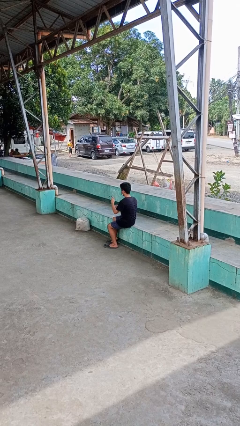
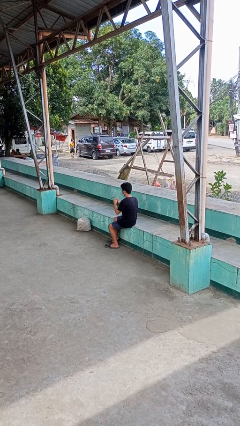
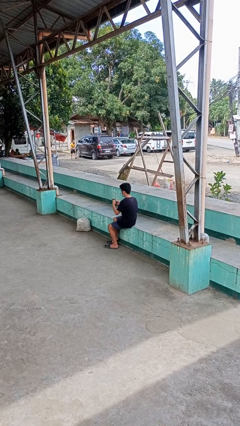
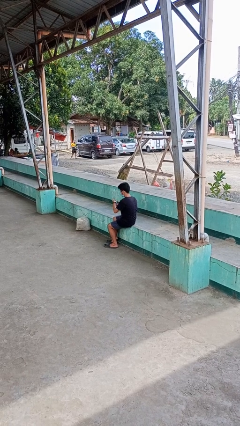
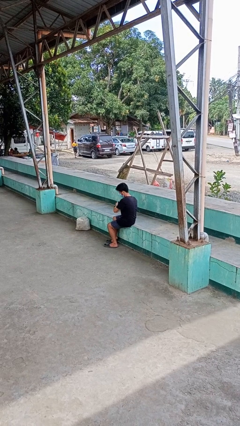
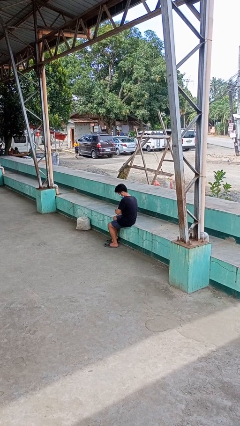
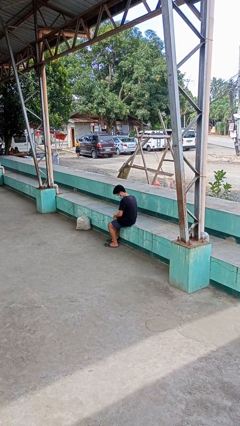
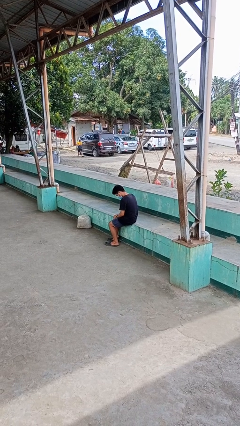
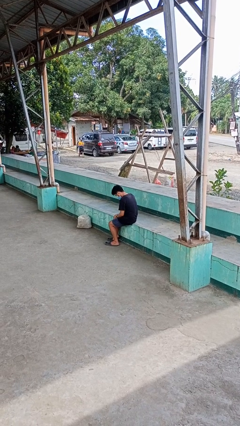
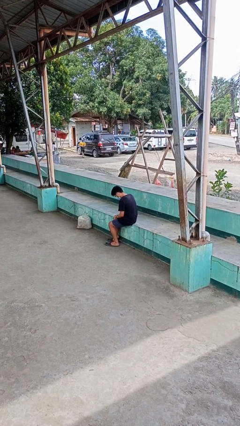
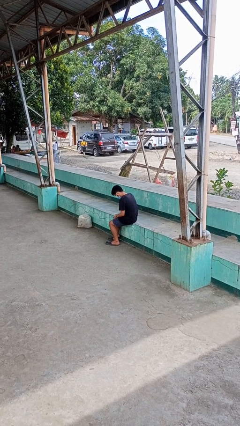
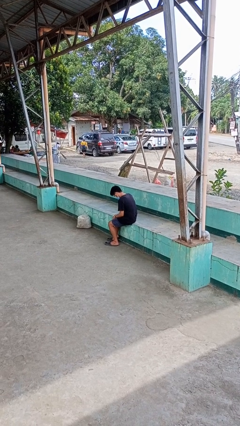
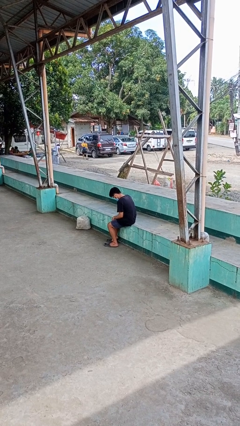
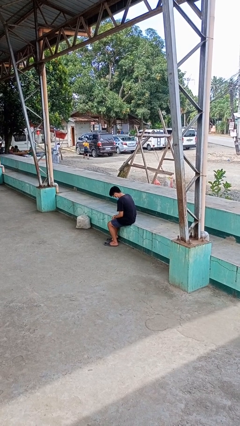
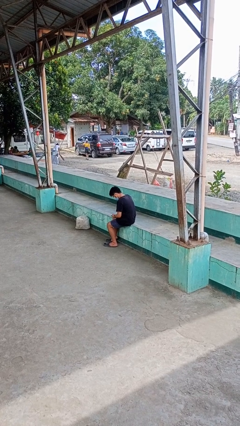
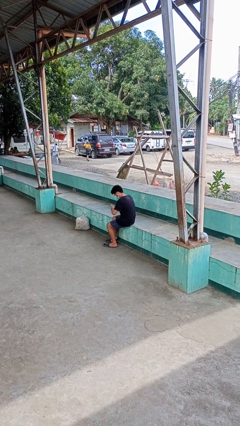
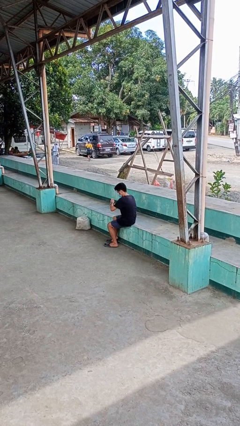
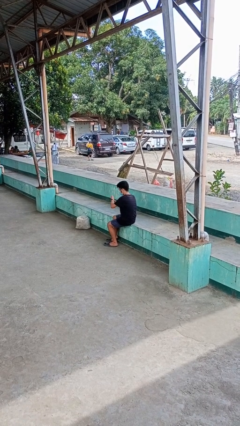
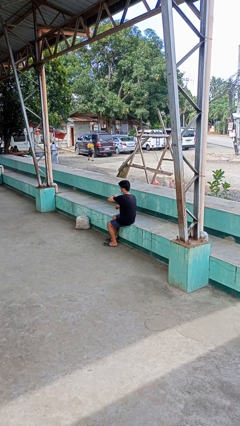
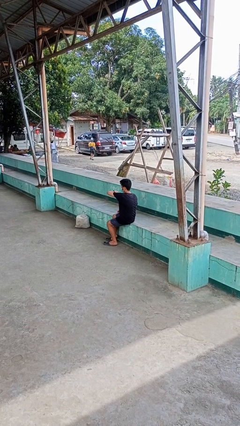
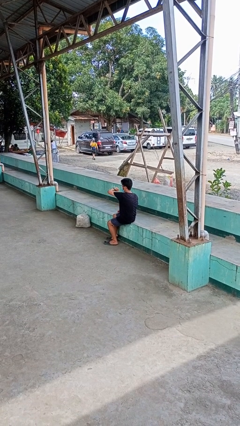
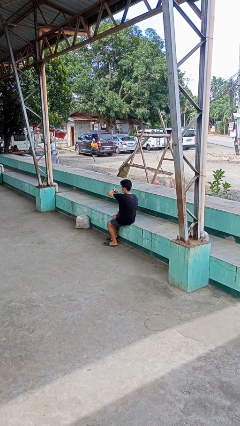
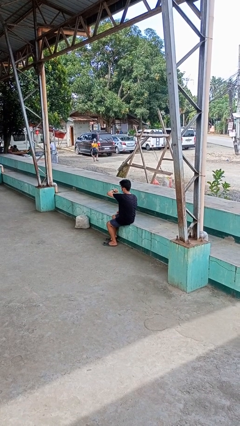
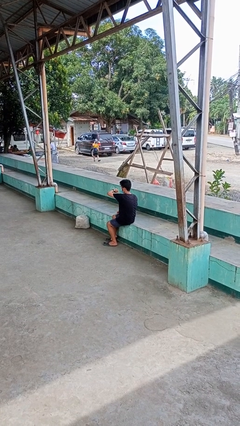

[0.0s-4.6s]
person puts on wristwatch

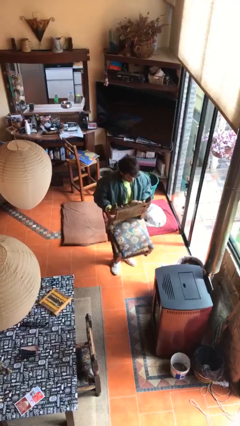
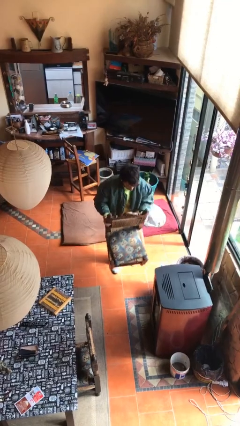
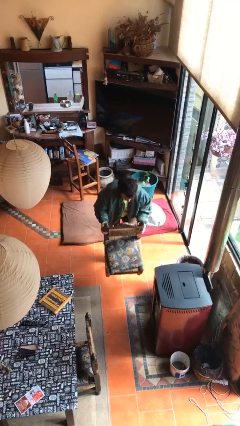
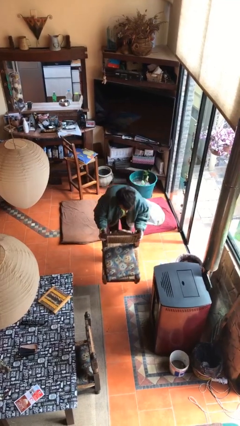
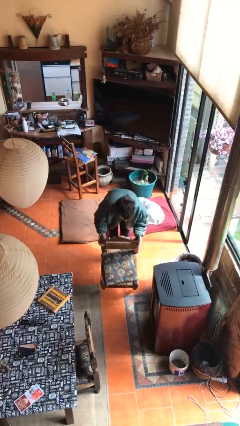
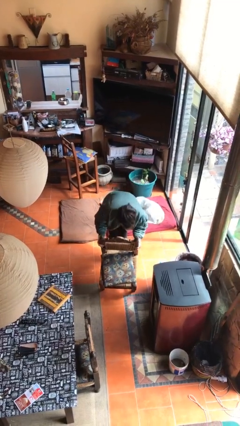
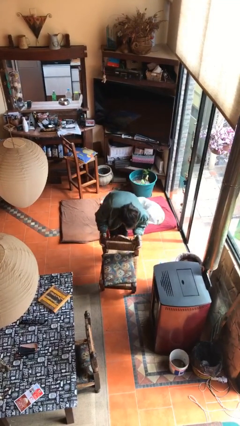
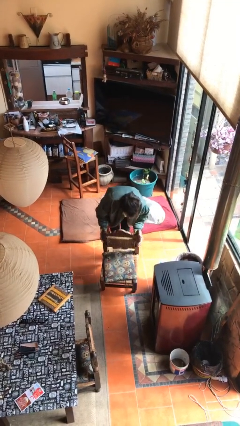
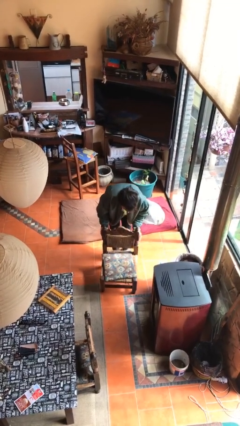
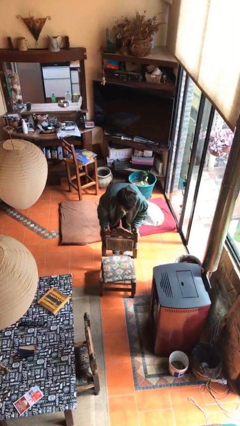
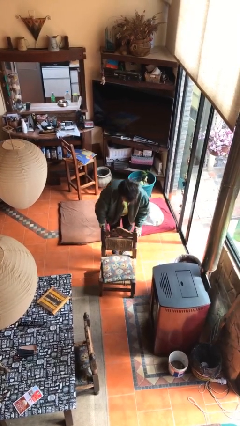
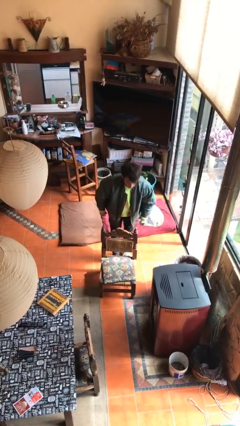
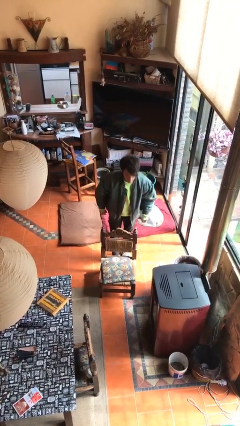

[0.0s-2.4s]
person puts down object on floor

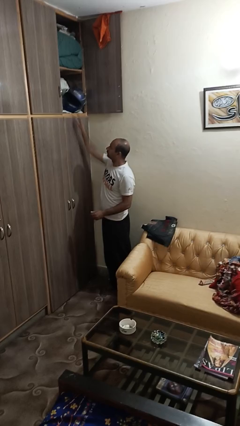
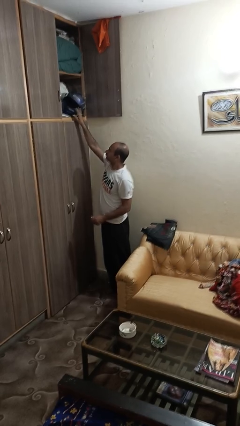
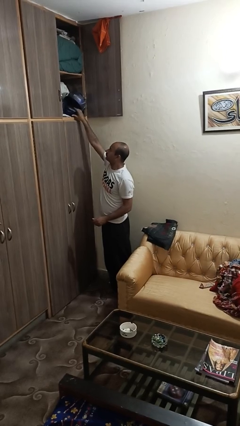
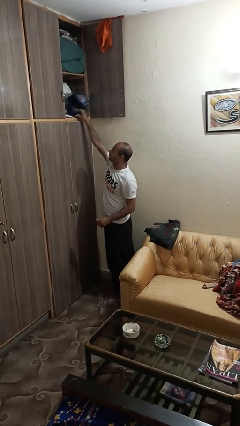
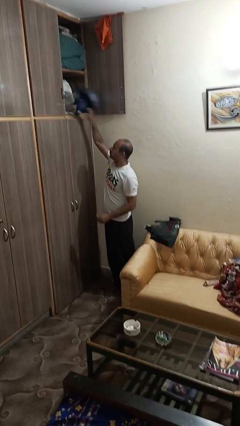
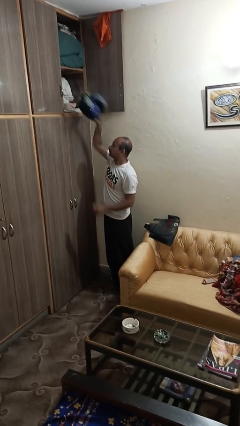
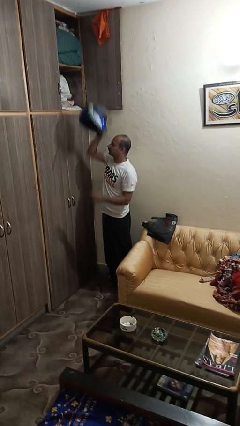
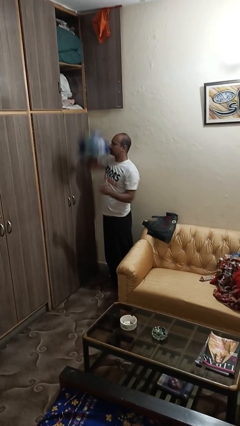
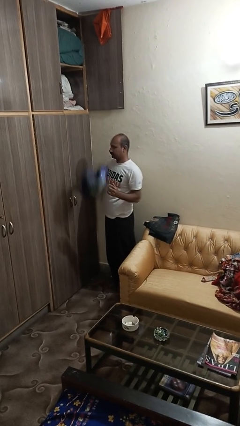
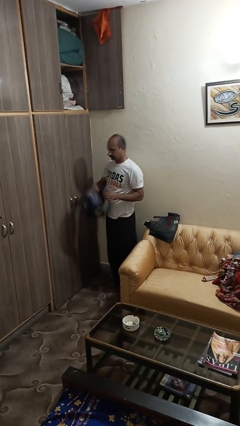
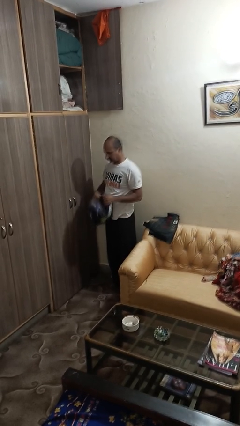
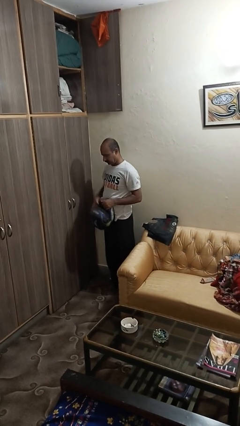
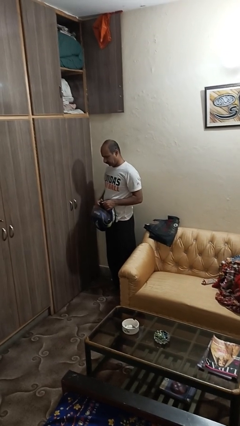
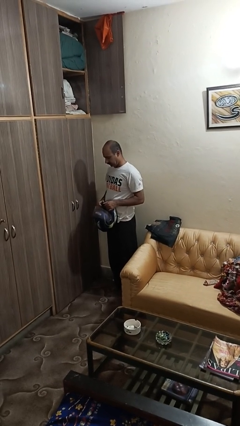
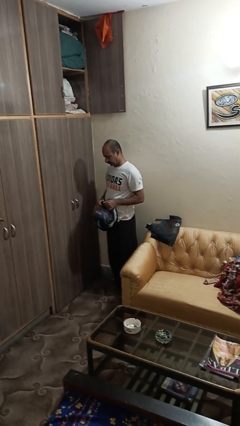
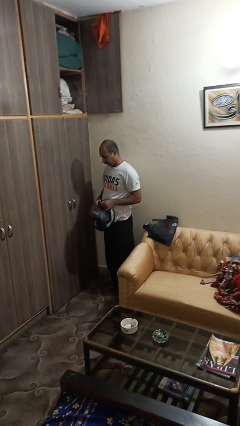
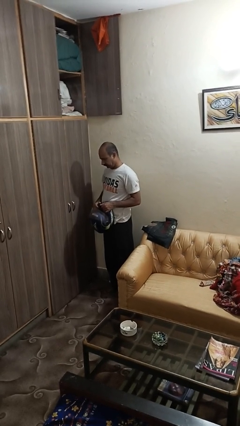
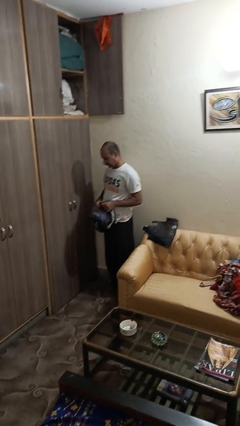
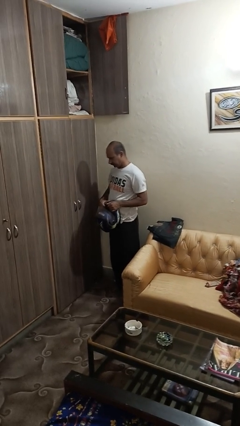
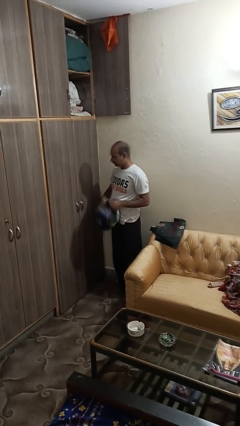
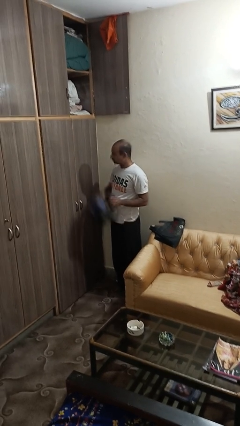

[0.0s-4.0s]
person picks up object from shelf

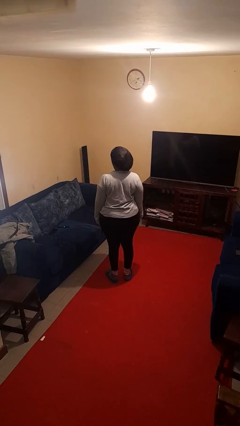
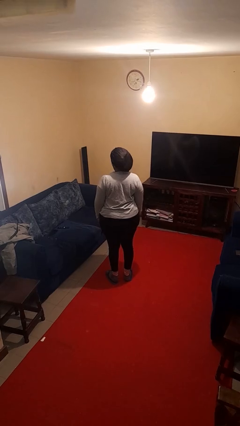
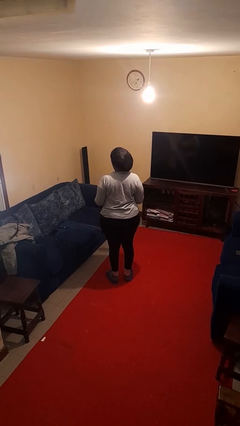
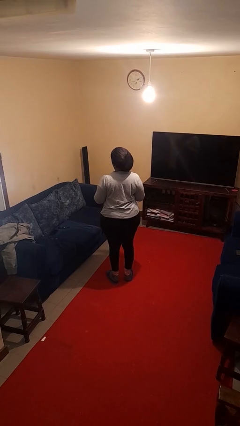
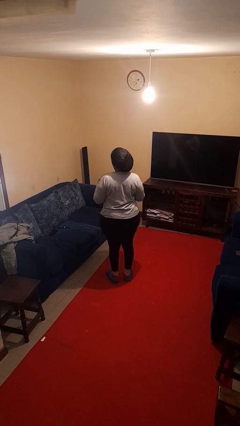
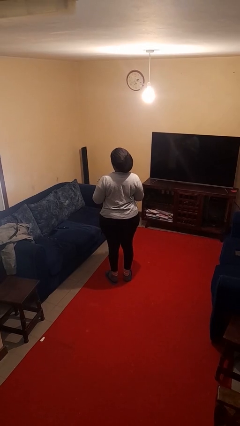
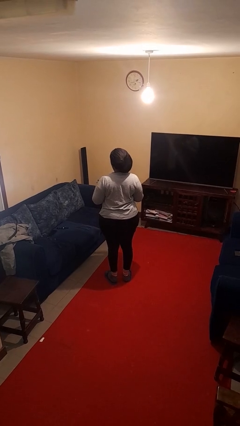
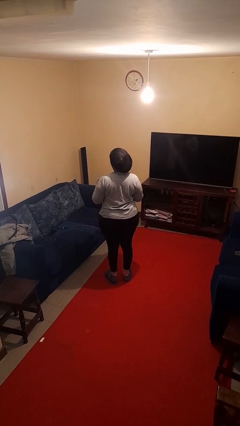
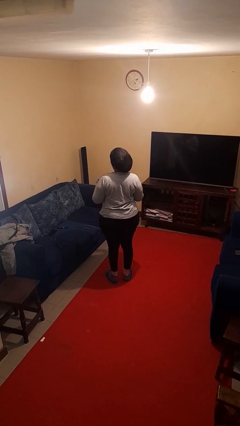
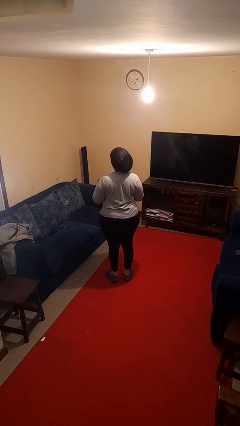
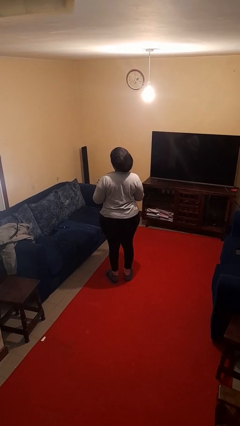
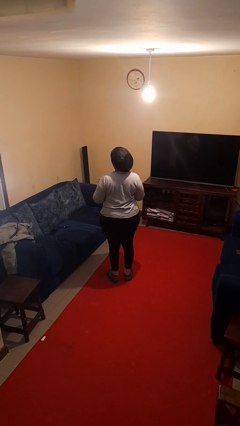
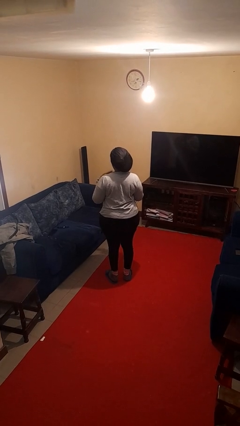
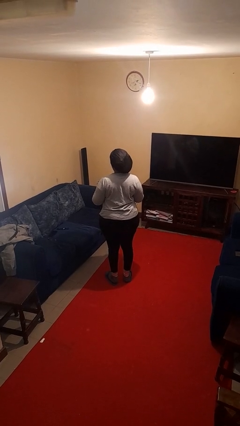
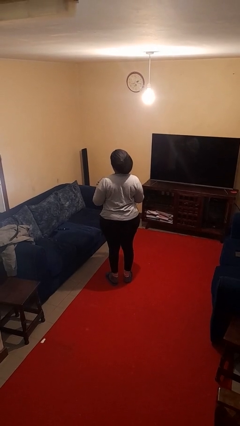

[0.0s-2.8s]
person drums on chest

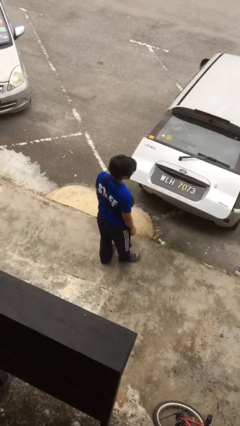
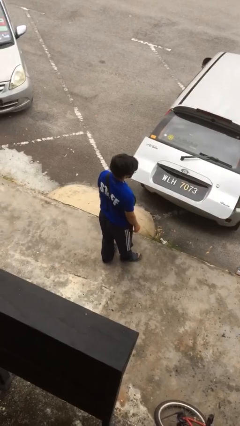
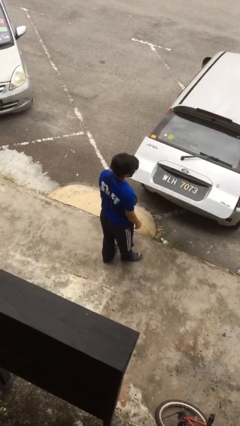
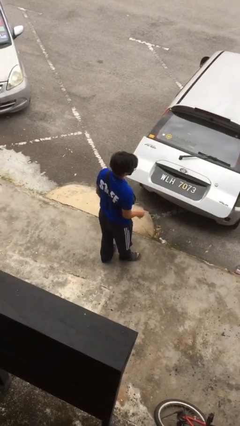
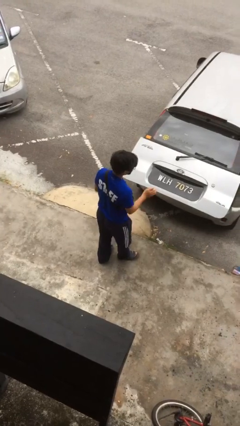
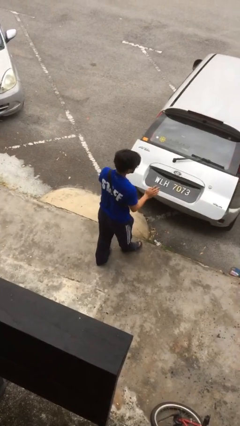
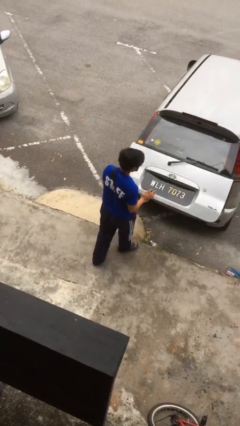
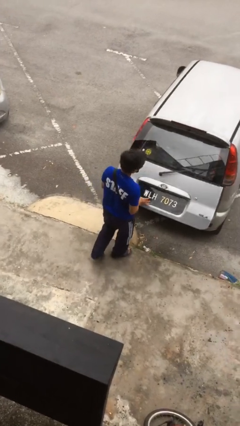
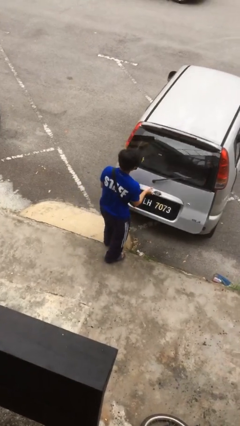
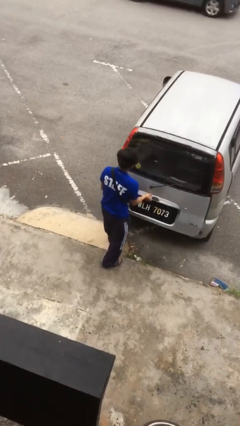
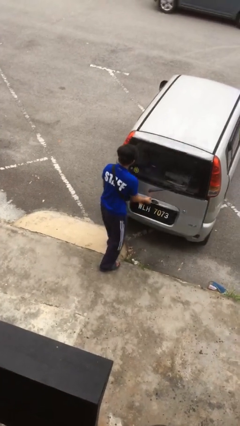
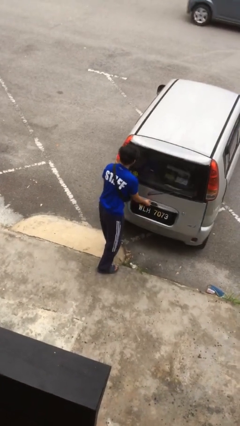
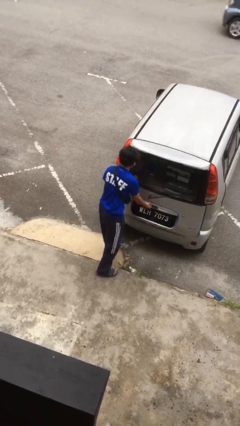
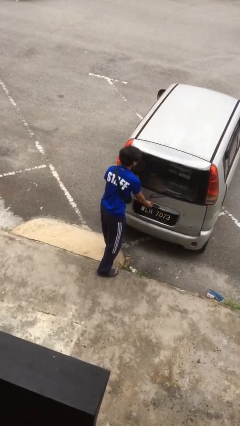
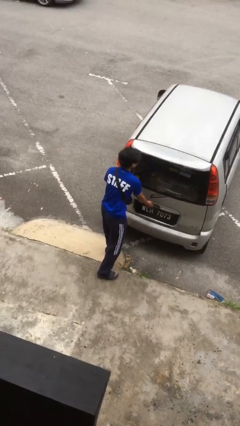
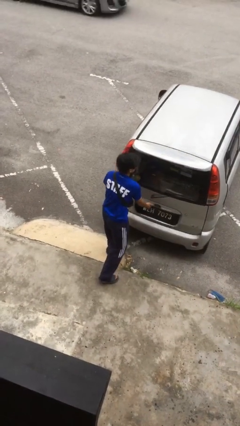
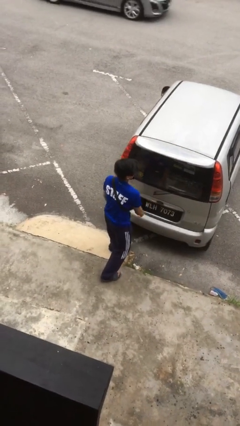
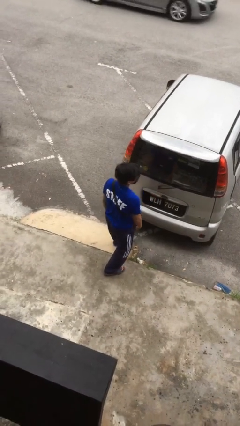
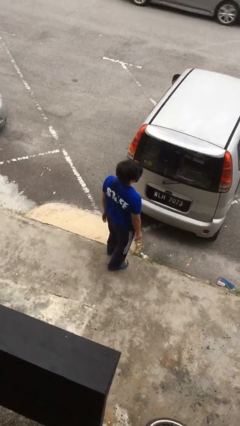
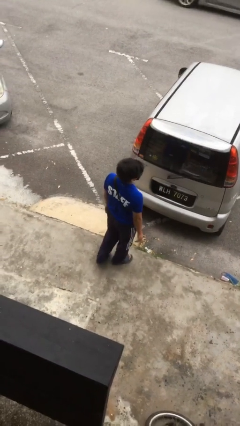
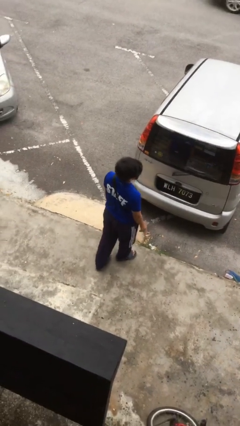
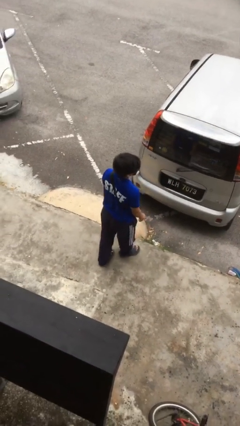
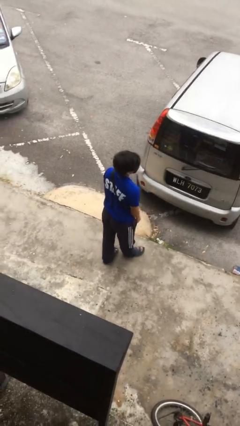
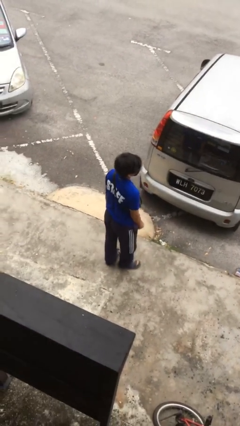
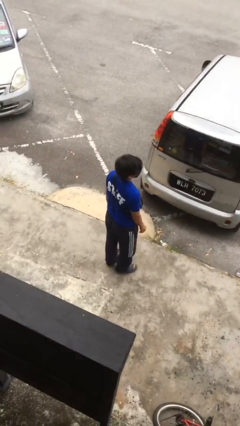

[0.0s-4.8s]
person closes car trunk
